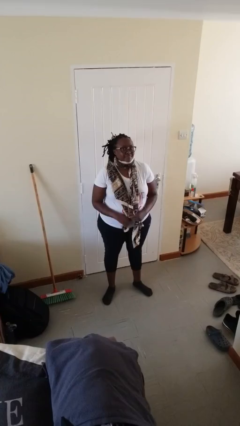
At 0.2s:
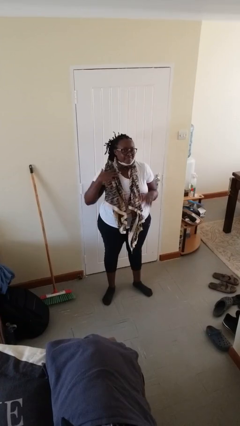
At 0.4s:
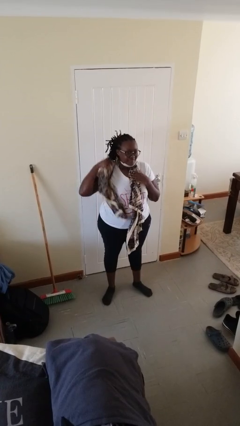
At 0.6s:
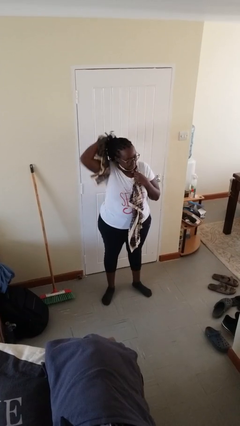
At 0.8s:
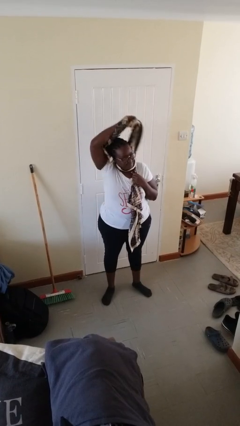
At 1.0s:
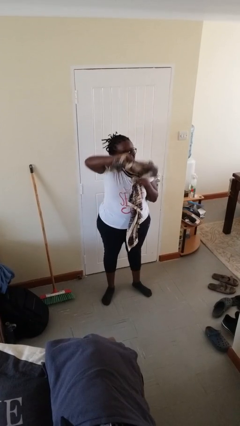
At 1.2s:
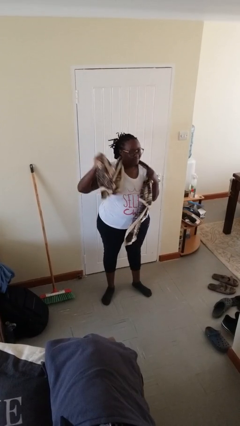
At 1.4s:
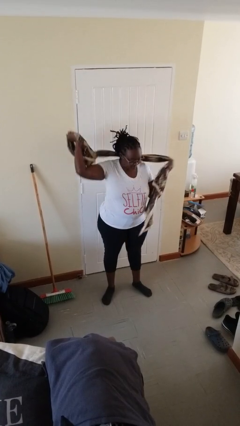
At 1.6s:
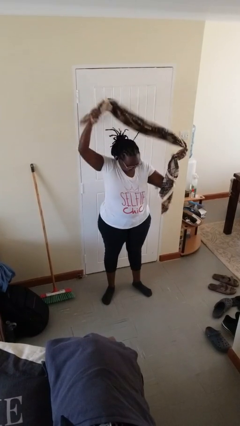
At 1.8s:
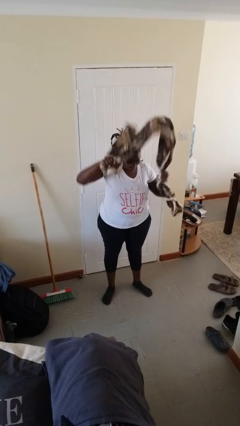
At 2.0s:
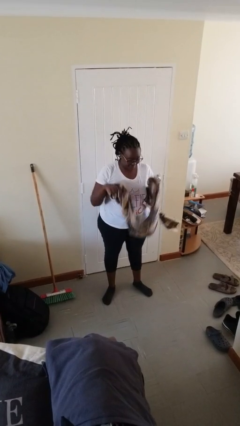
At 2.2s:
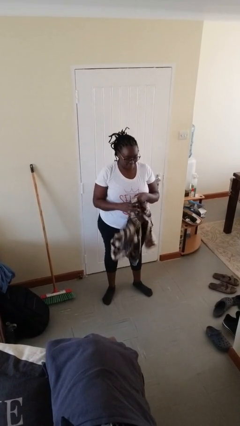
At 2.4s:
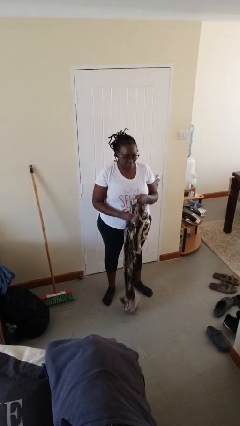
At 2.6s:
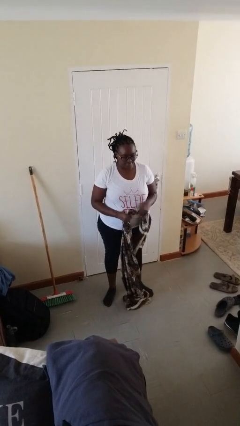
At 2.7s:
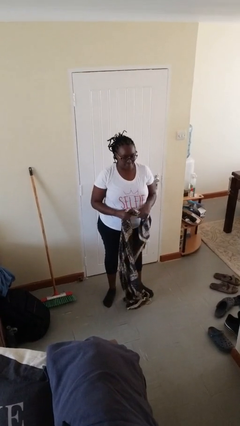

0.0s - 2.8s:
person takes off scarf

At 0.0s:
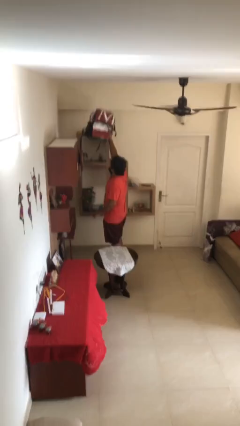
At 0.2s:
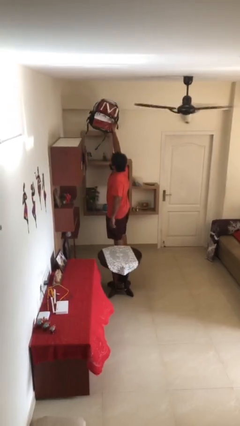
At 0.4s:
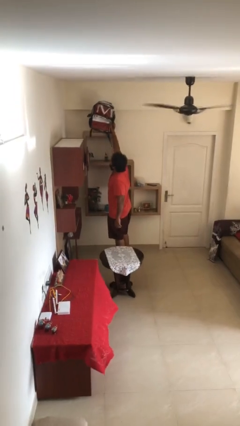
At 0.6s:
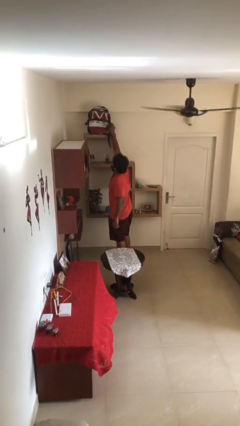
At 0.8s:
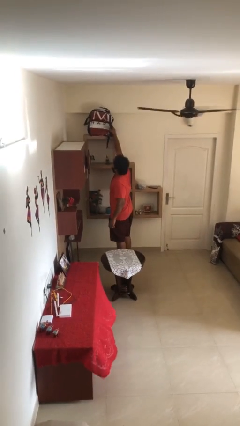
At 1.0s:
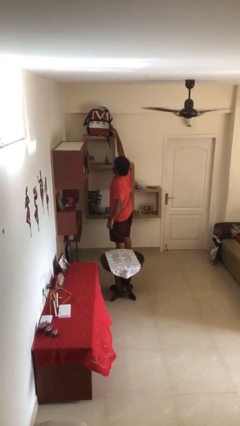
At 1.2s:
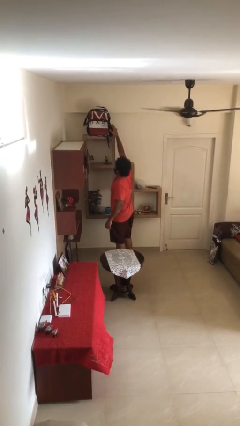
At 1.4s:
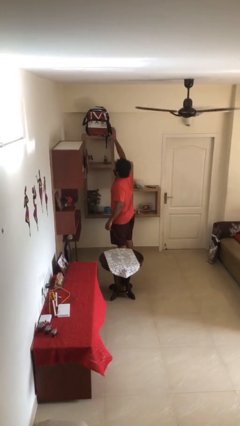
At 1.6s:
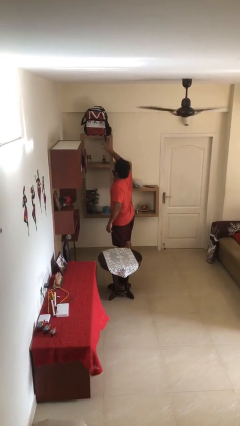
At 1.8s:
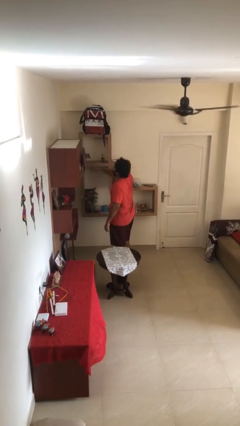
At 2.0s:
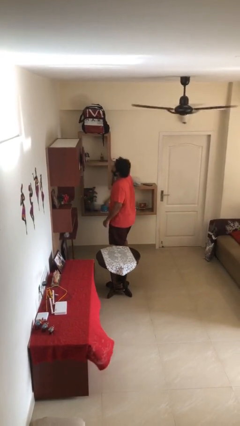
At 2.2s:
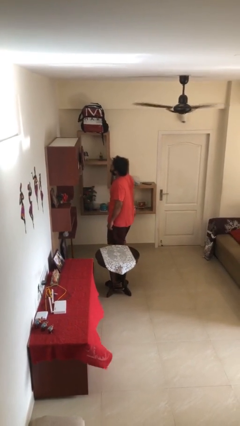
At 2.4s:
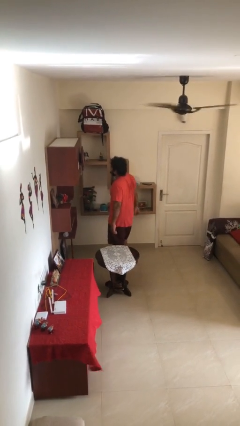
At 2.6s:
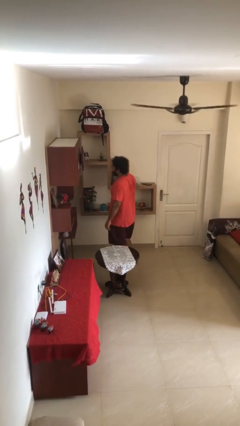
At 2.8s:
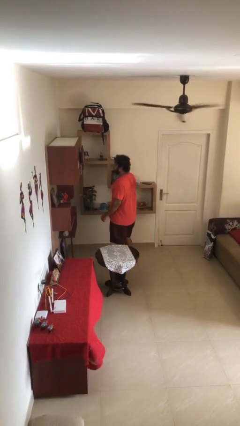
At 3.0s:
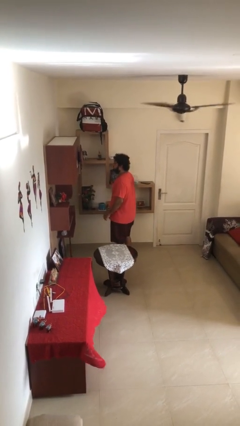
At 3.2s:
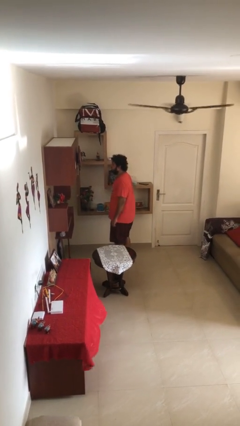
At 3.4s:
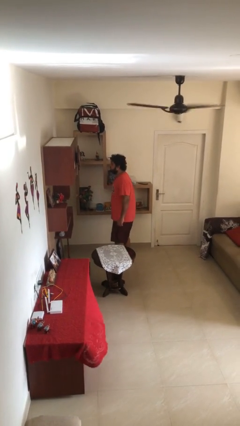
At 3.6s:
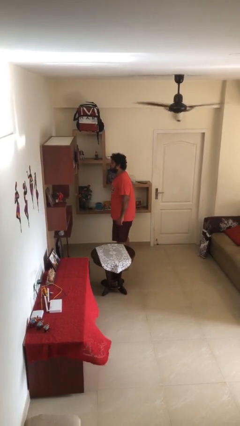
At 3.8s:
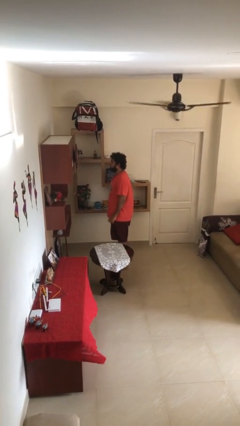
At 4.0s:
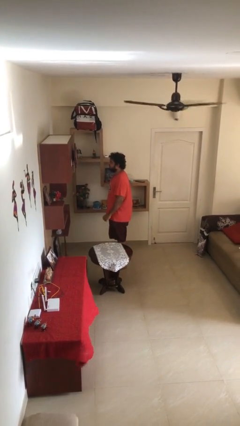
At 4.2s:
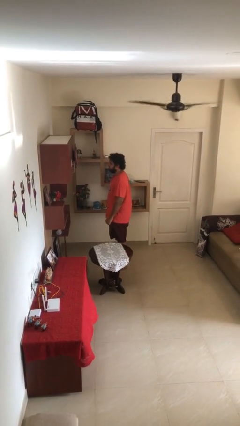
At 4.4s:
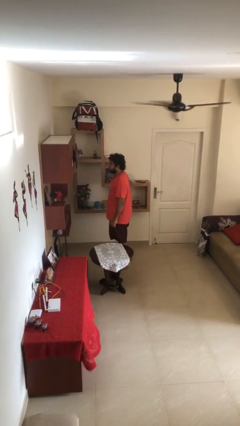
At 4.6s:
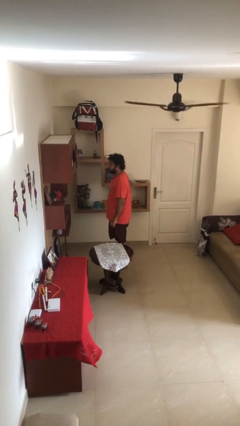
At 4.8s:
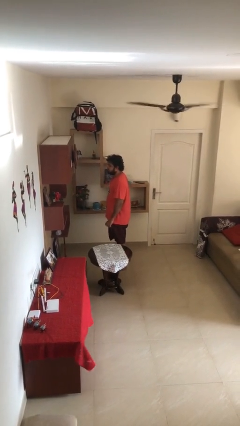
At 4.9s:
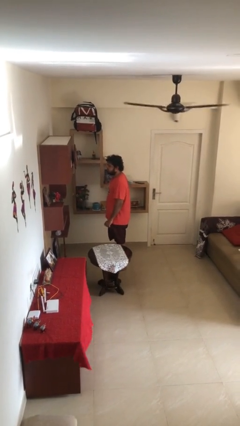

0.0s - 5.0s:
person puts down object on shelf

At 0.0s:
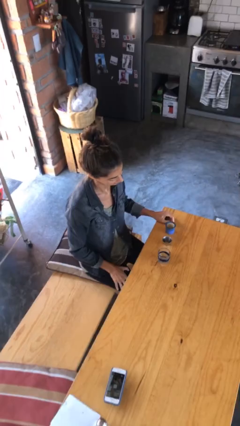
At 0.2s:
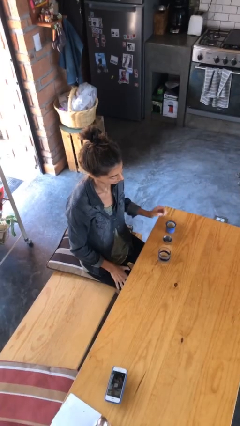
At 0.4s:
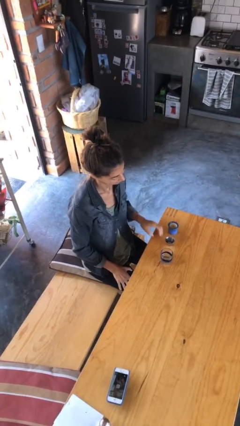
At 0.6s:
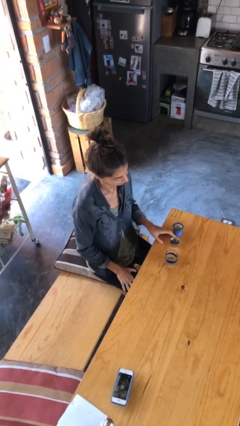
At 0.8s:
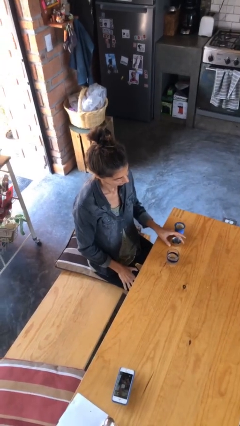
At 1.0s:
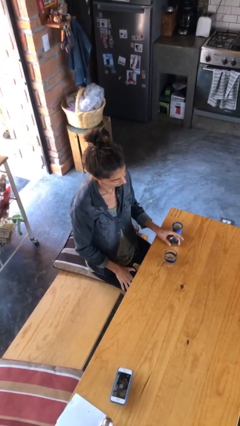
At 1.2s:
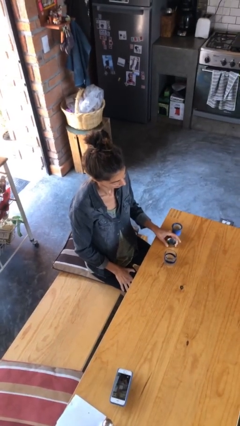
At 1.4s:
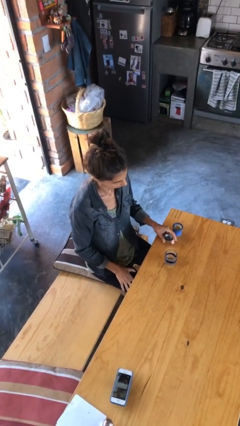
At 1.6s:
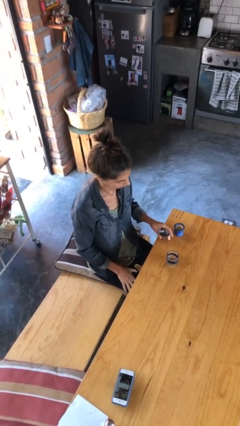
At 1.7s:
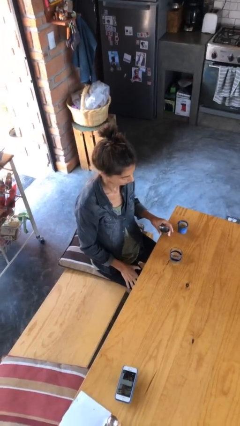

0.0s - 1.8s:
person picks up object from table

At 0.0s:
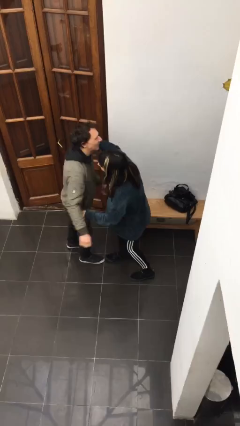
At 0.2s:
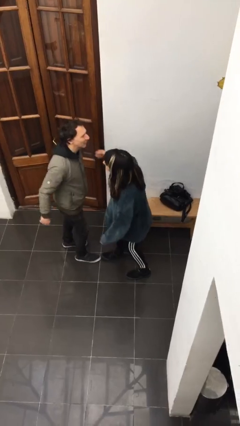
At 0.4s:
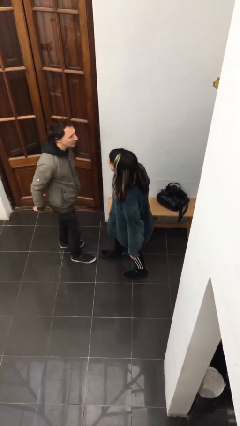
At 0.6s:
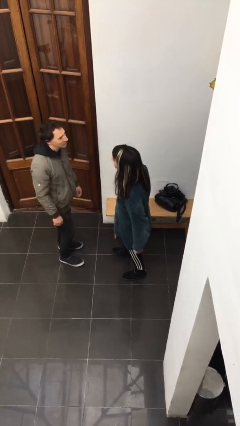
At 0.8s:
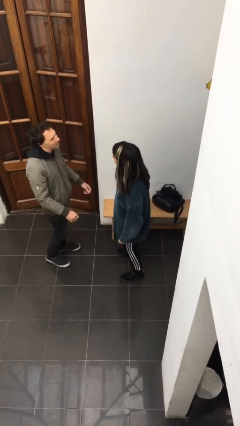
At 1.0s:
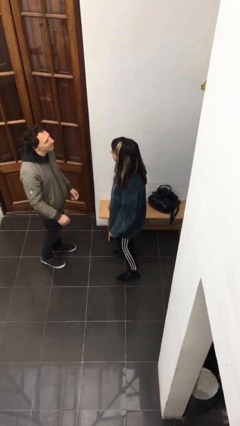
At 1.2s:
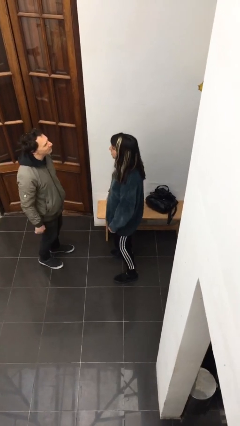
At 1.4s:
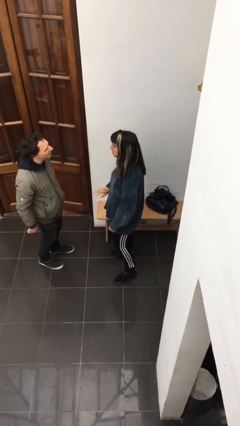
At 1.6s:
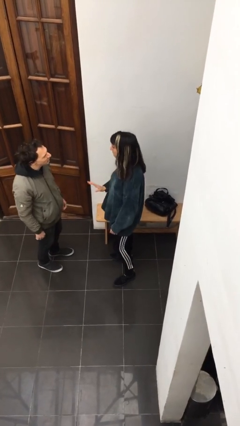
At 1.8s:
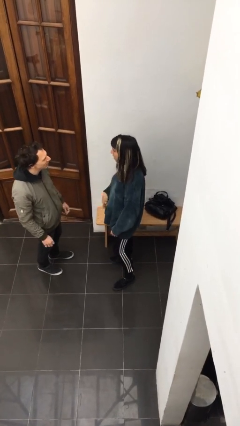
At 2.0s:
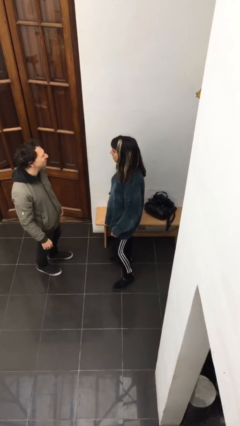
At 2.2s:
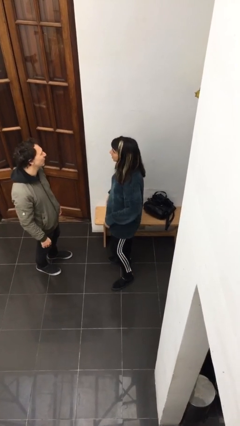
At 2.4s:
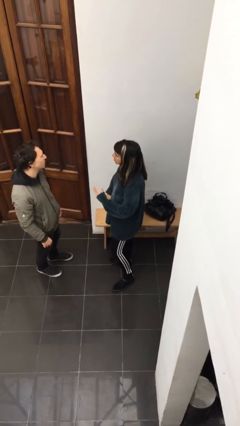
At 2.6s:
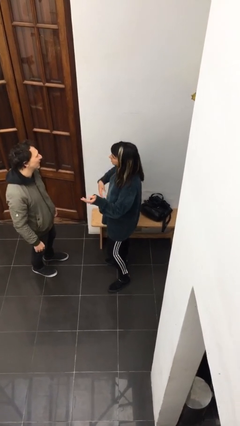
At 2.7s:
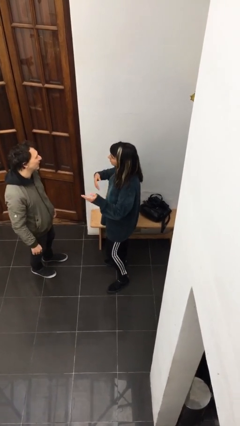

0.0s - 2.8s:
person talks to person

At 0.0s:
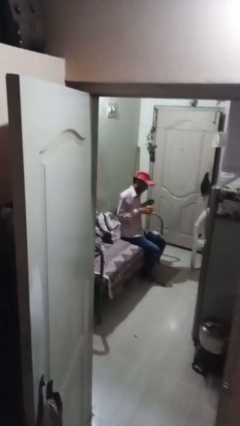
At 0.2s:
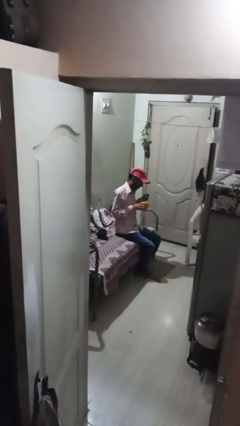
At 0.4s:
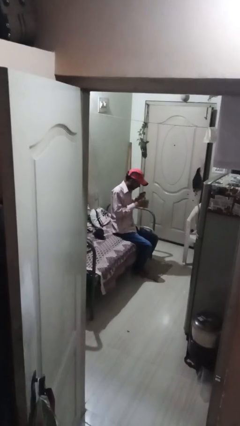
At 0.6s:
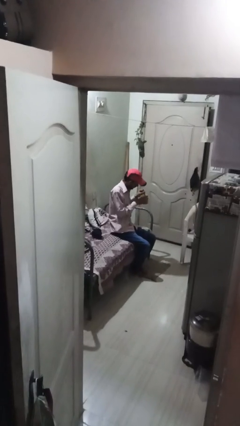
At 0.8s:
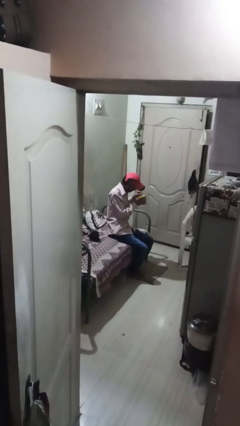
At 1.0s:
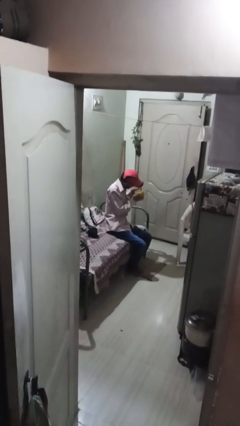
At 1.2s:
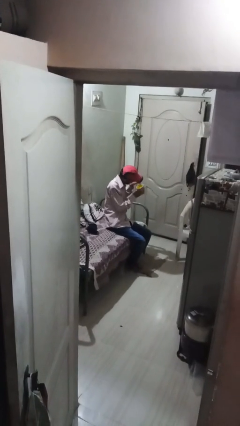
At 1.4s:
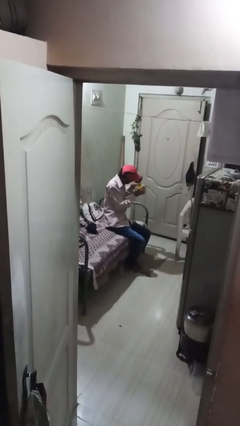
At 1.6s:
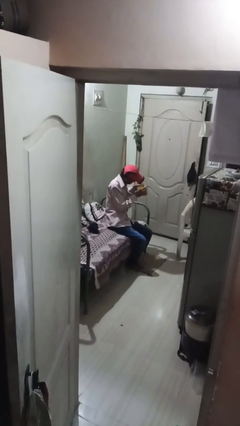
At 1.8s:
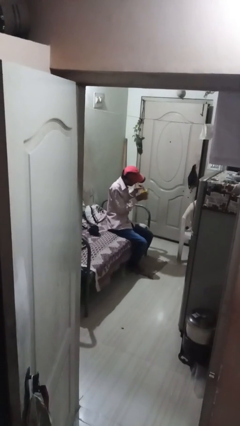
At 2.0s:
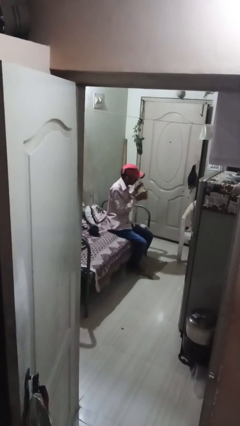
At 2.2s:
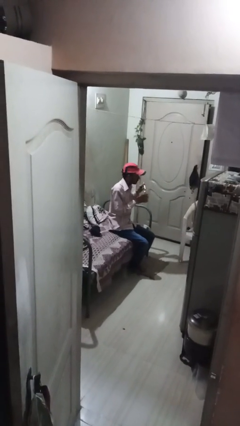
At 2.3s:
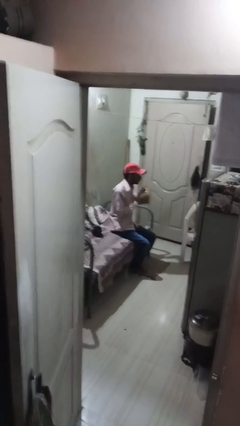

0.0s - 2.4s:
person stirs mug

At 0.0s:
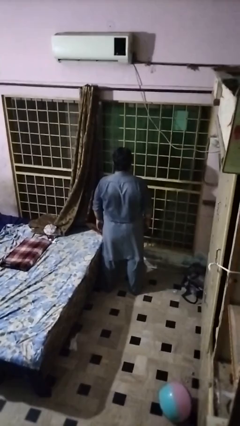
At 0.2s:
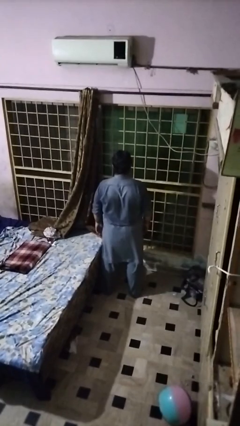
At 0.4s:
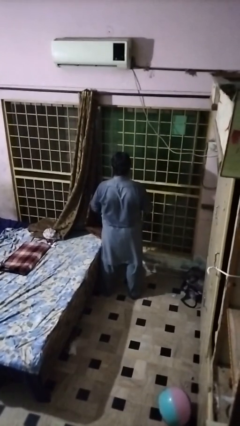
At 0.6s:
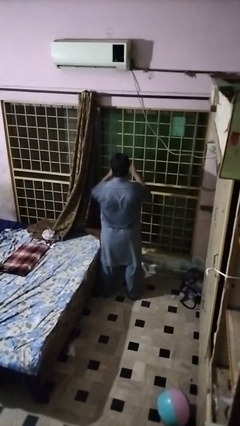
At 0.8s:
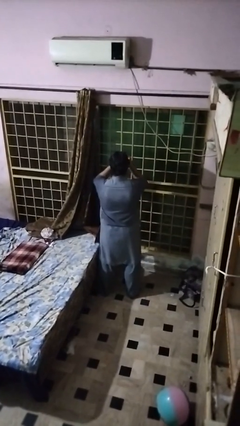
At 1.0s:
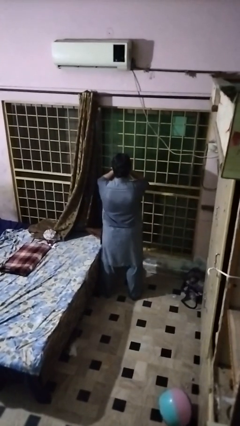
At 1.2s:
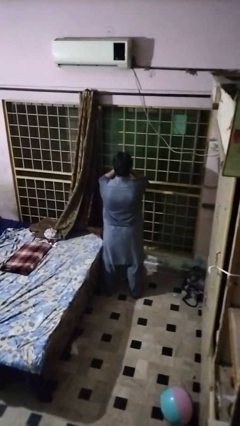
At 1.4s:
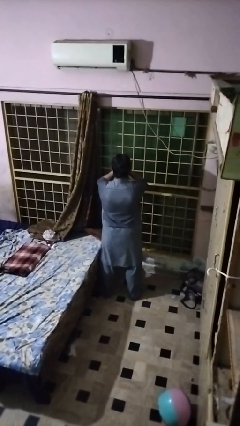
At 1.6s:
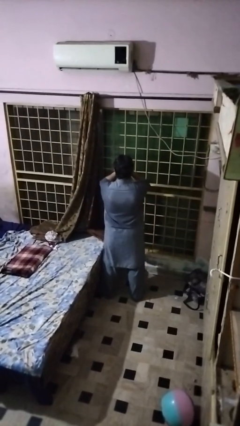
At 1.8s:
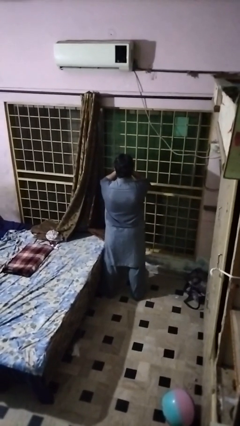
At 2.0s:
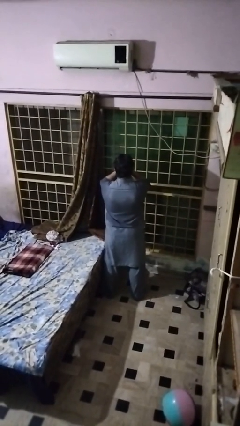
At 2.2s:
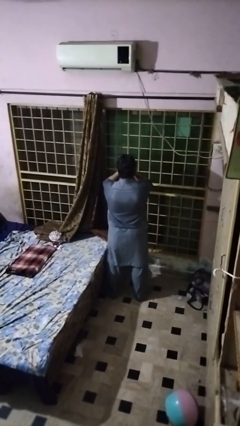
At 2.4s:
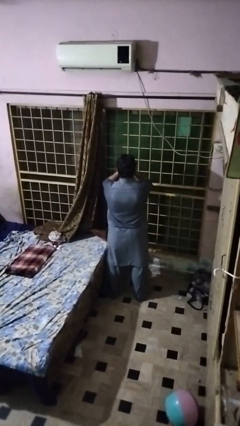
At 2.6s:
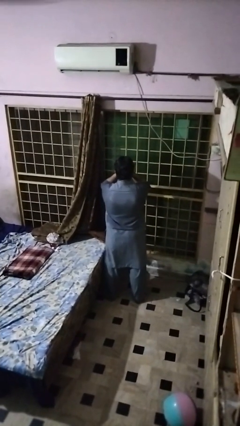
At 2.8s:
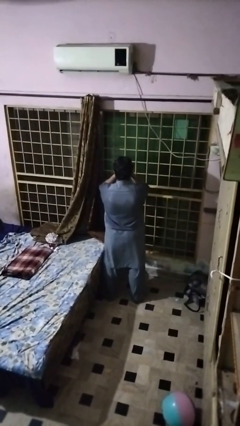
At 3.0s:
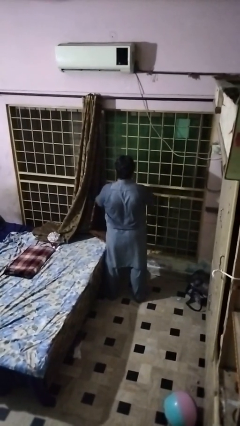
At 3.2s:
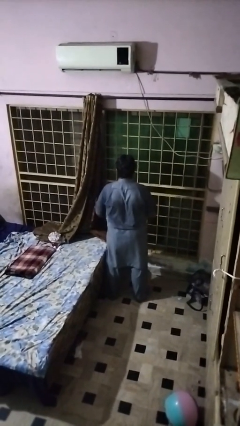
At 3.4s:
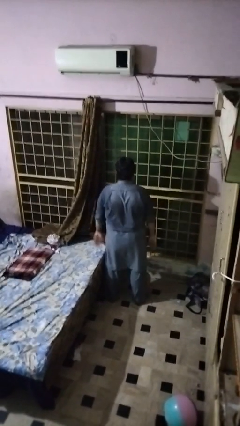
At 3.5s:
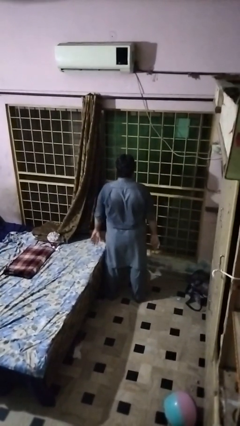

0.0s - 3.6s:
person covers face with hands
